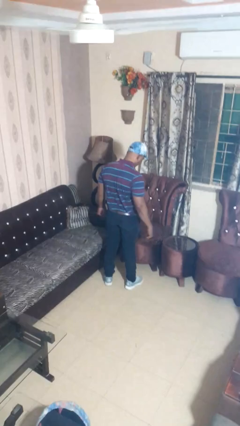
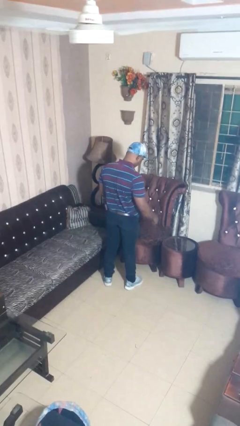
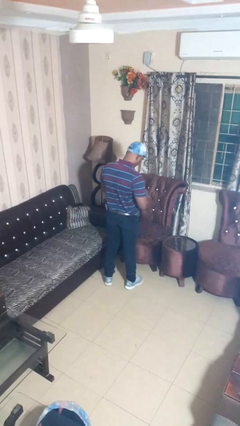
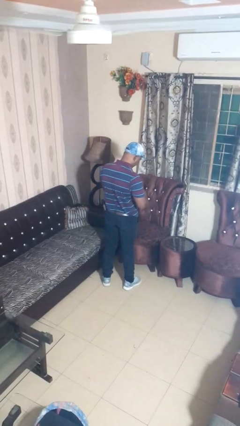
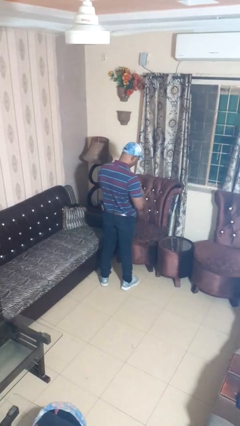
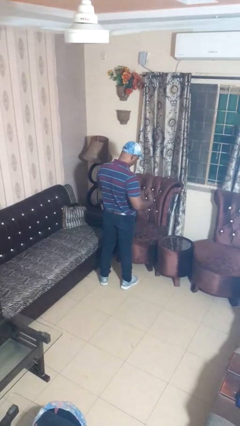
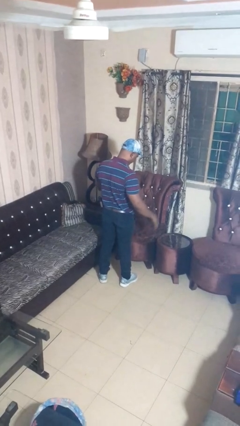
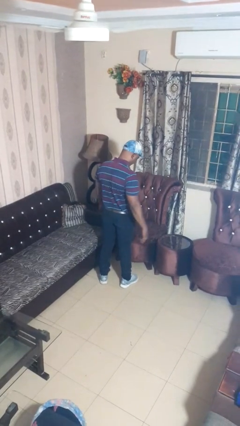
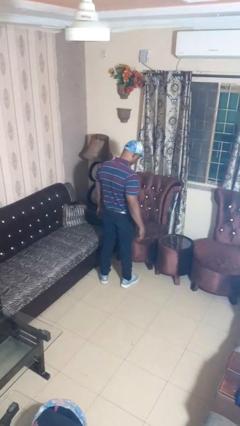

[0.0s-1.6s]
person takes off ring

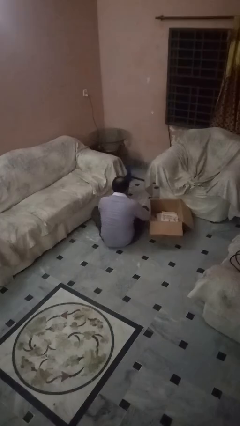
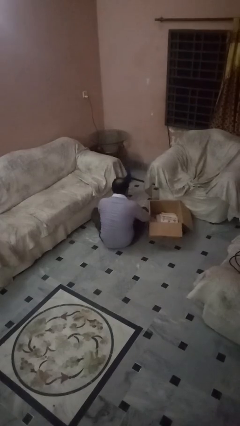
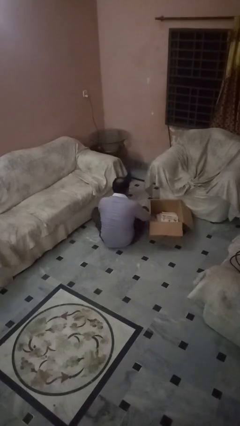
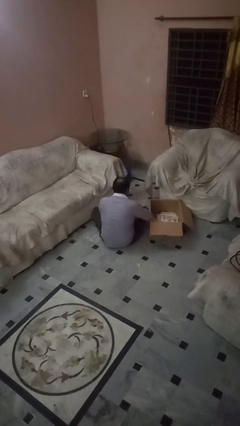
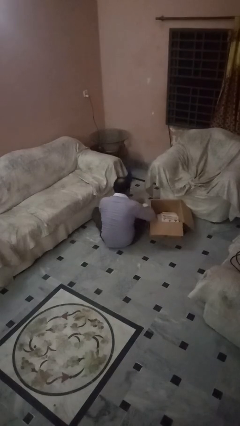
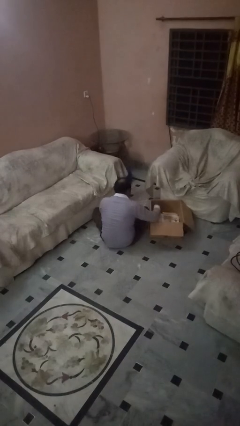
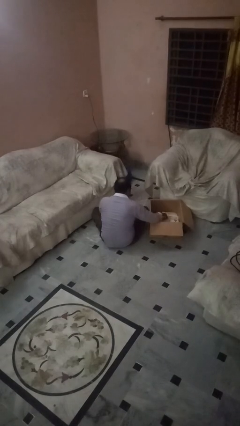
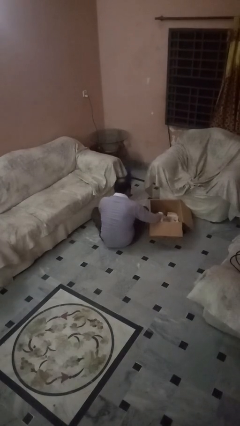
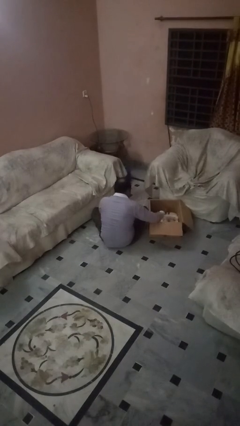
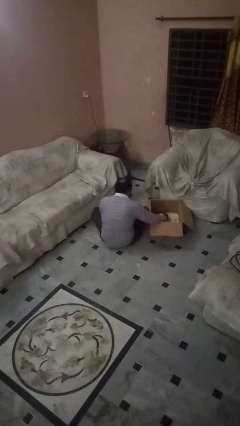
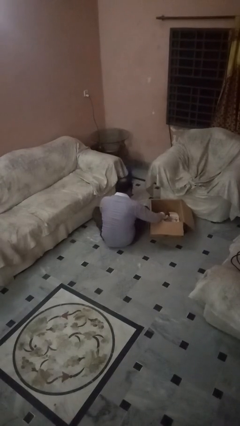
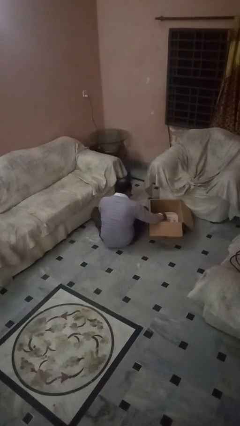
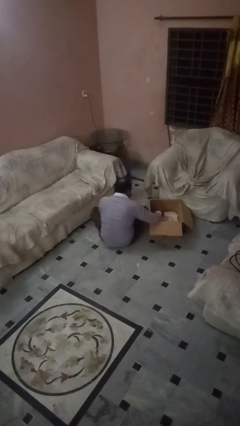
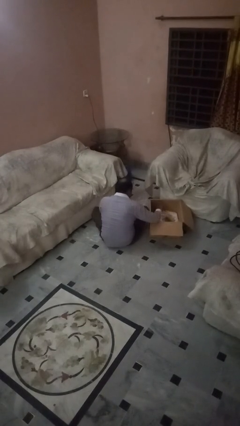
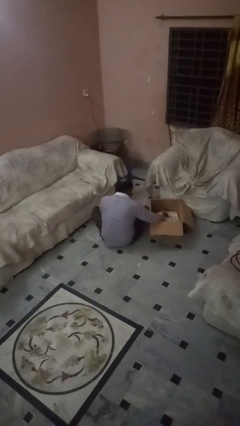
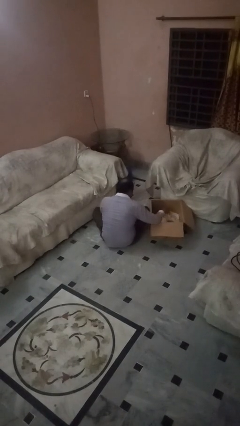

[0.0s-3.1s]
person searches in box

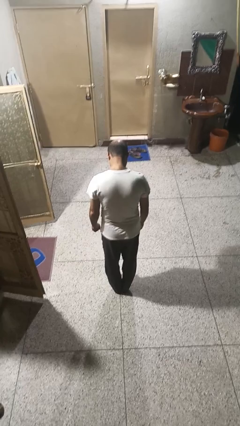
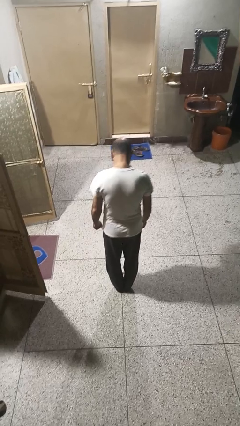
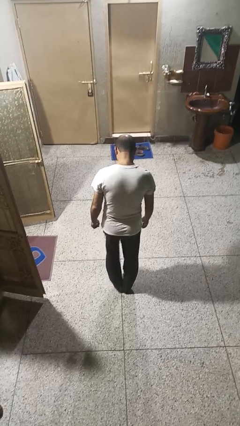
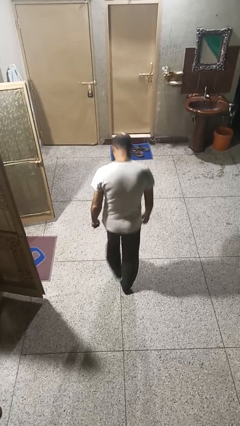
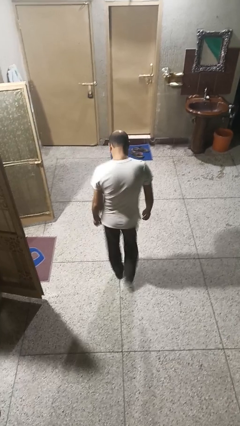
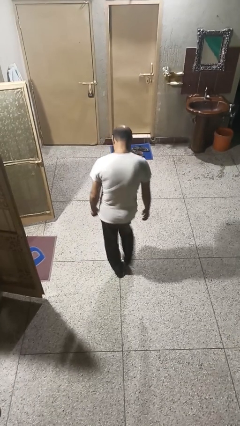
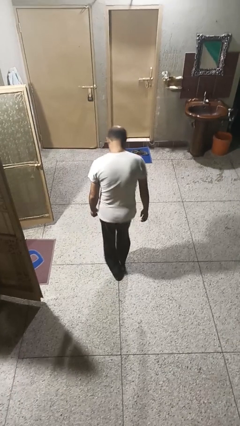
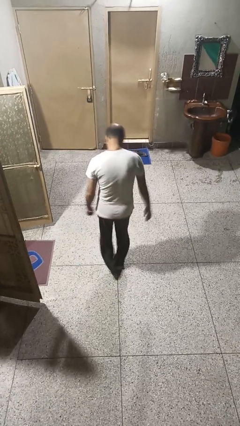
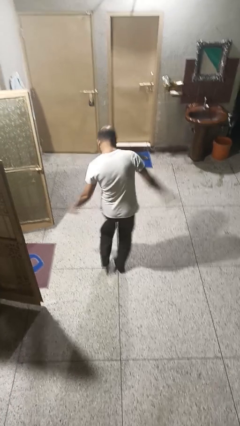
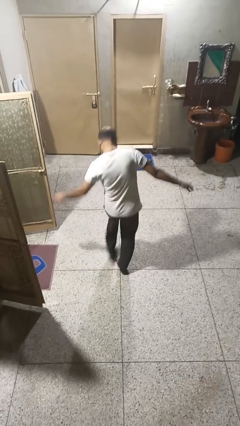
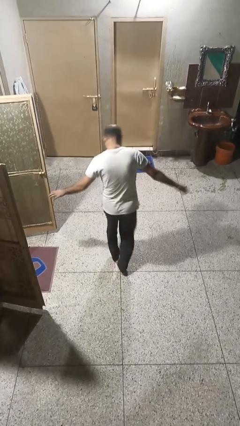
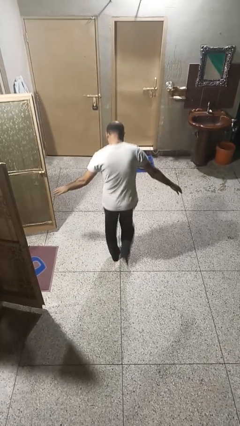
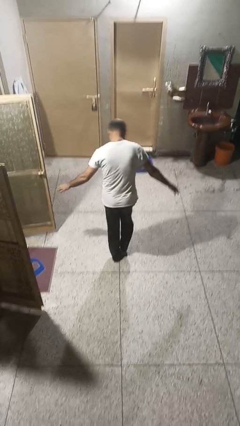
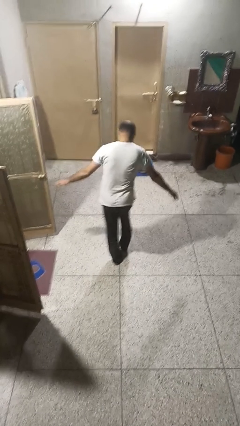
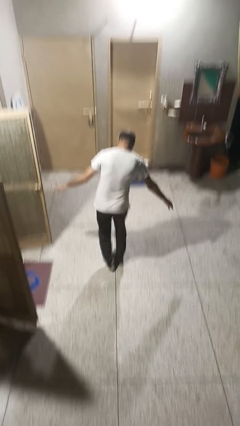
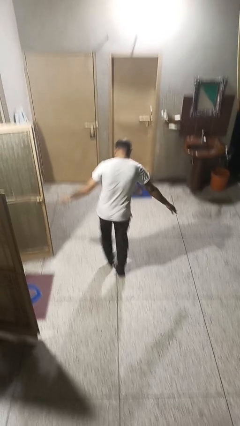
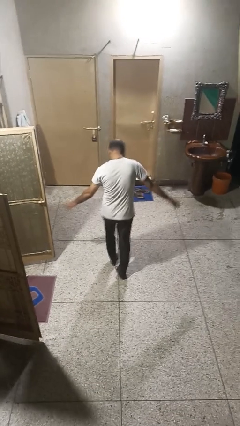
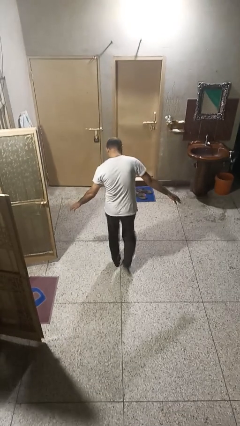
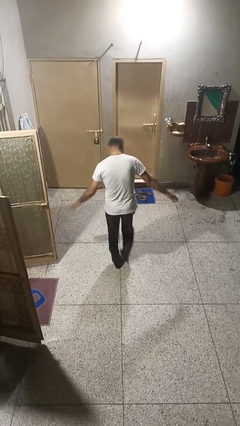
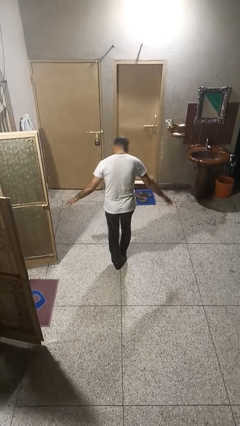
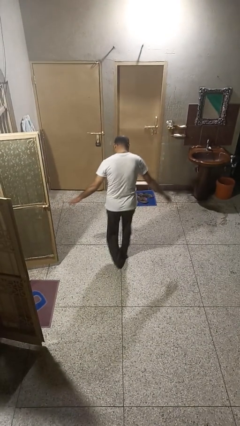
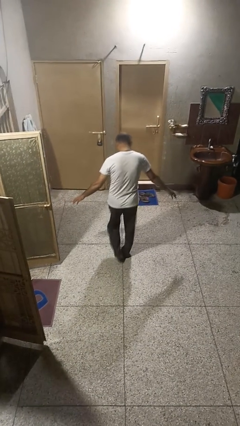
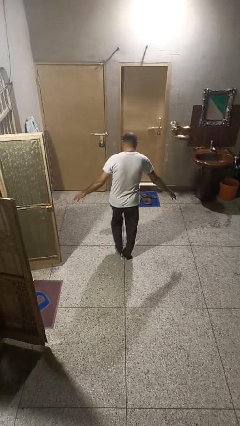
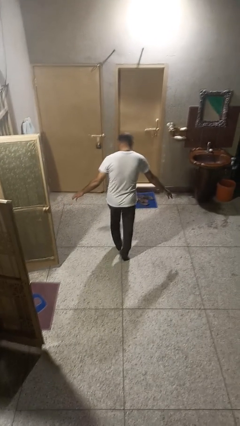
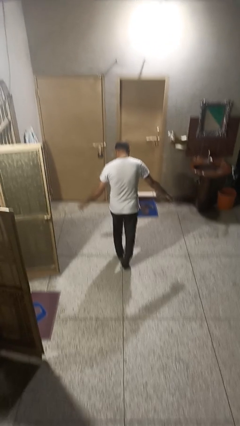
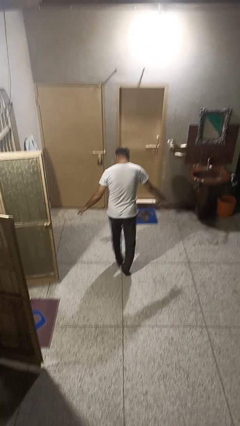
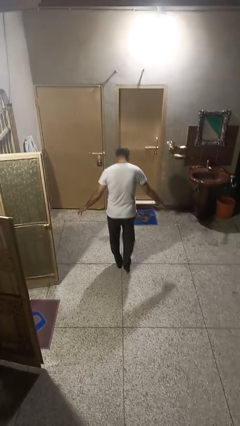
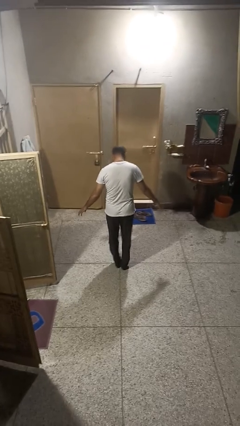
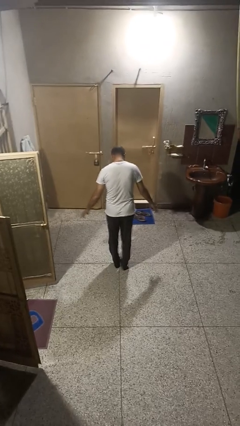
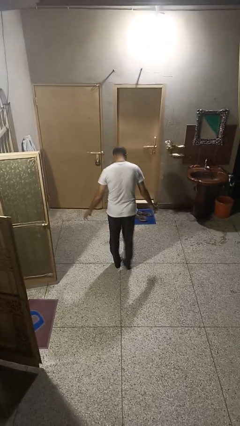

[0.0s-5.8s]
person walks tiptoe

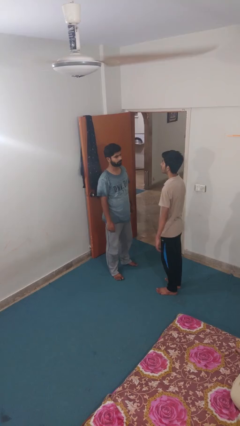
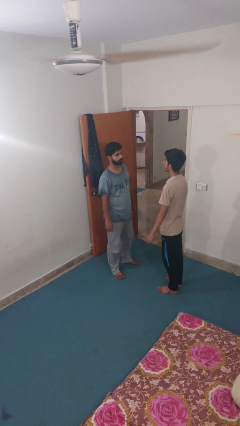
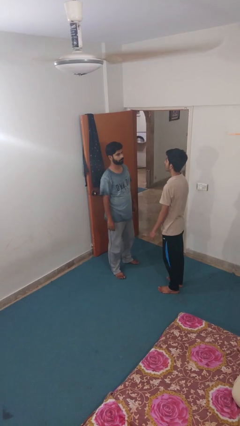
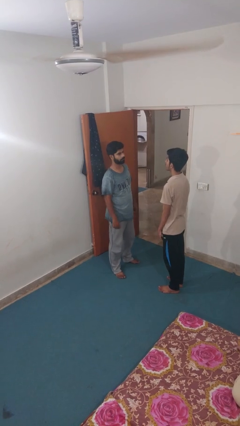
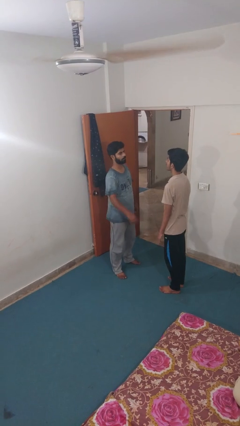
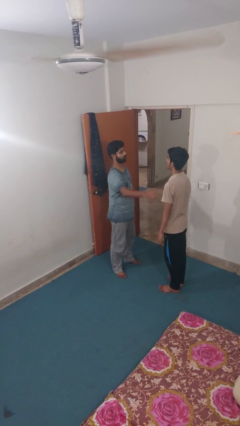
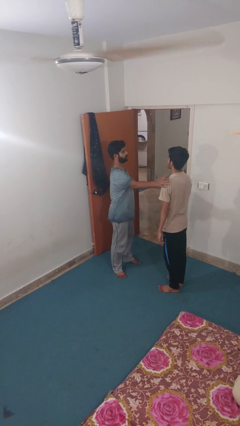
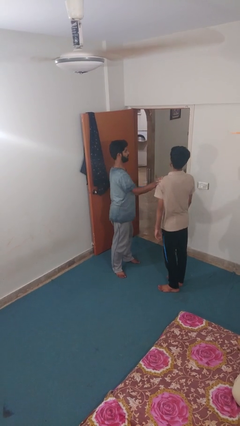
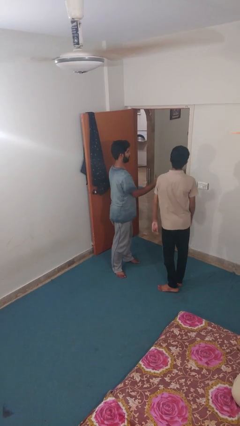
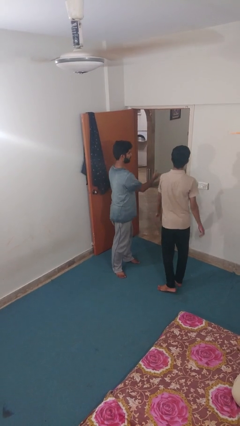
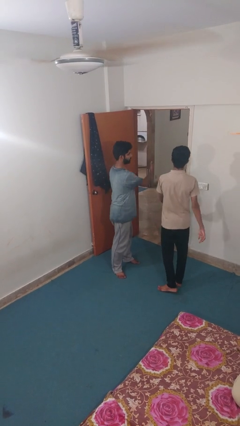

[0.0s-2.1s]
person shoves person

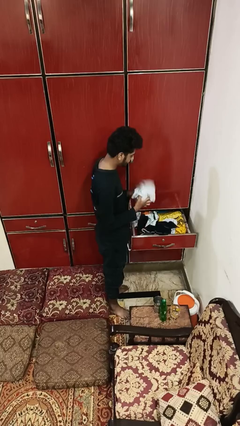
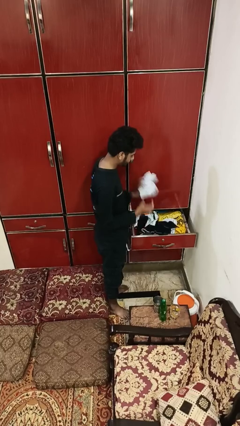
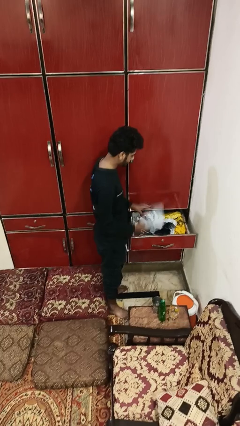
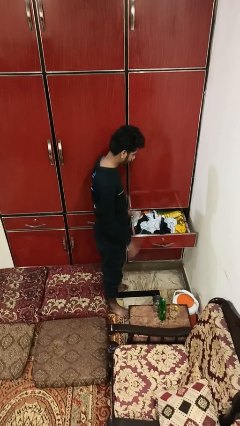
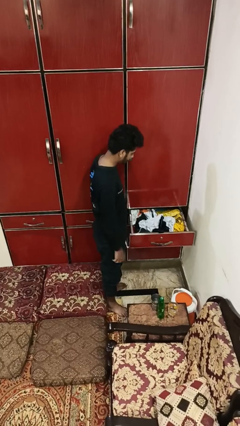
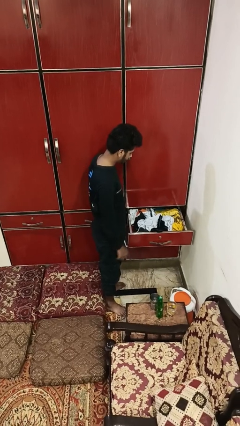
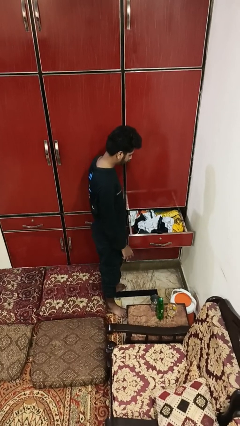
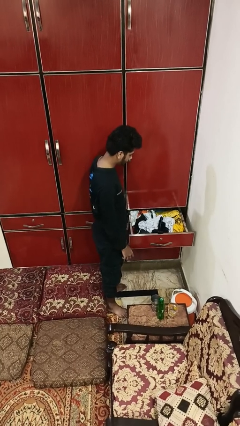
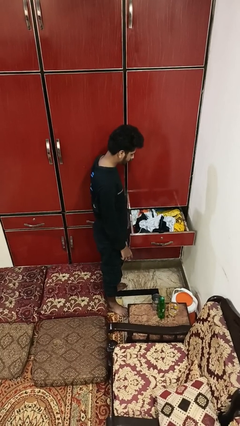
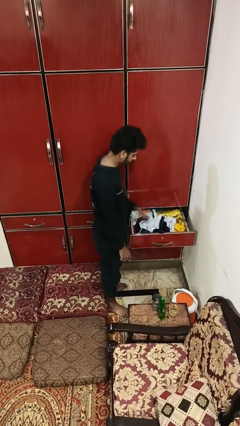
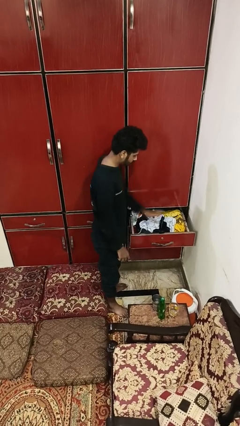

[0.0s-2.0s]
person puts clothes into dresser

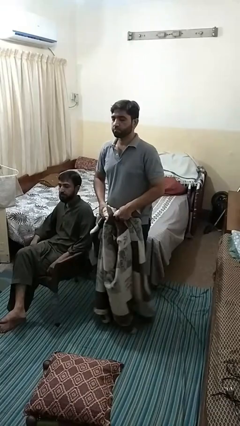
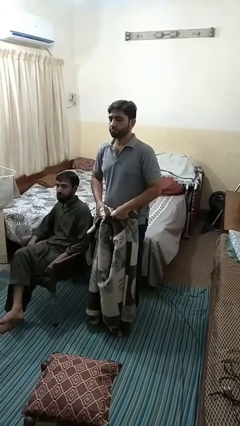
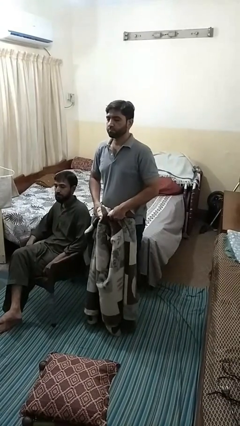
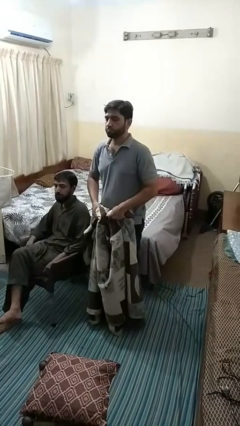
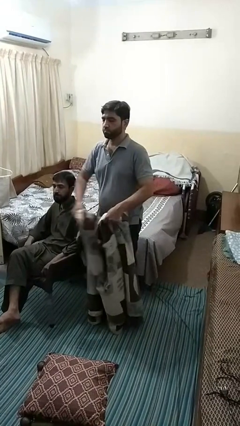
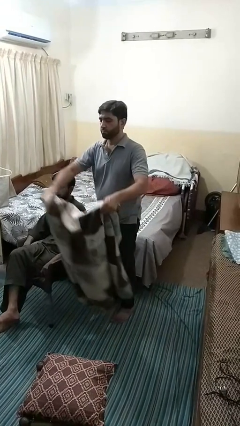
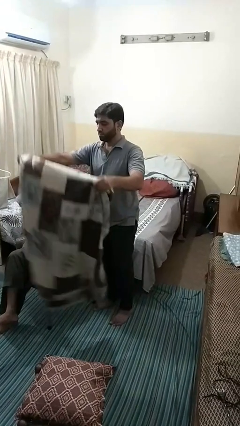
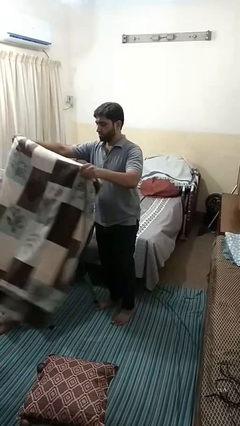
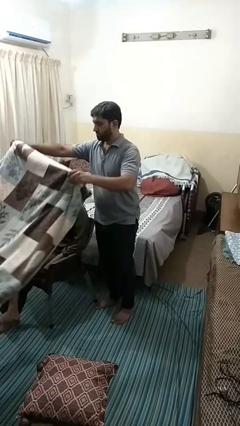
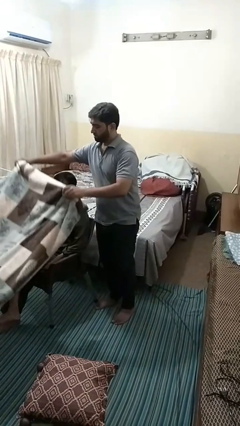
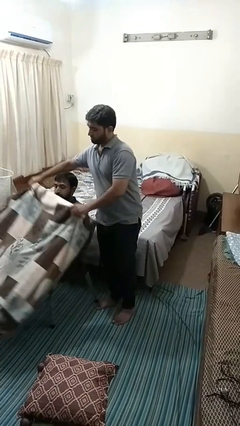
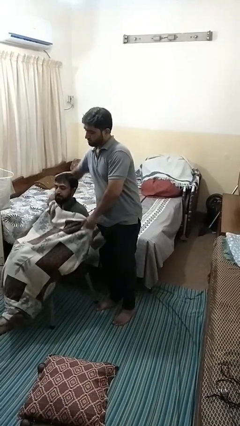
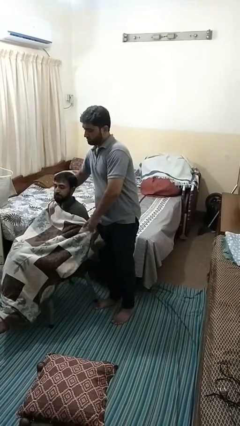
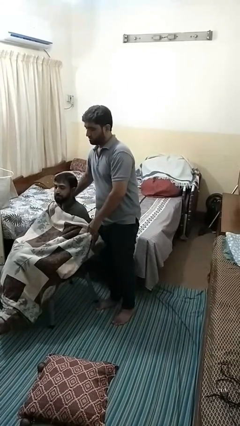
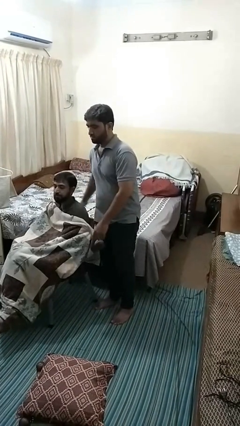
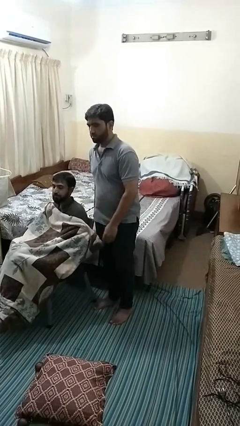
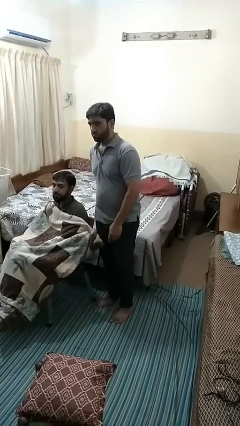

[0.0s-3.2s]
person covers friend with blanket

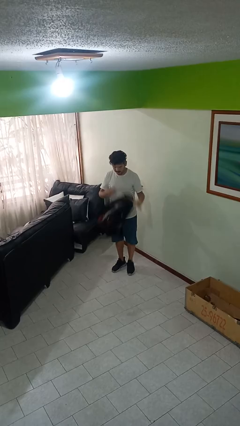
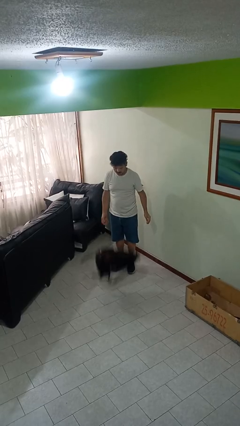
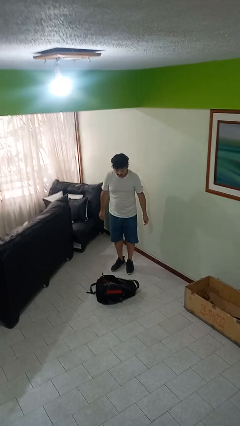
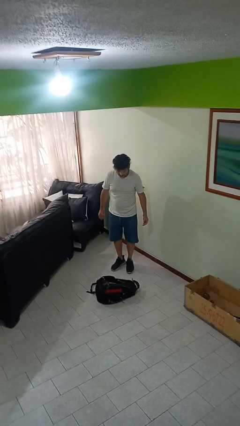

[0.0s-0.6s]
person drops object
